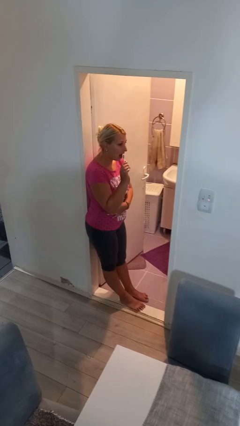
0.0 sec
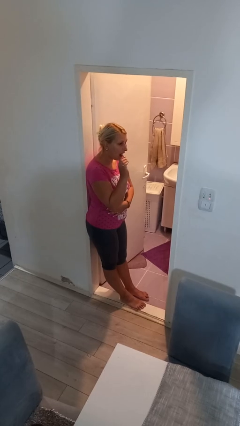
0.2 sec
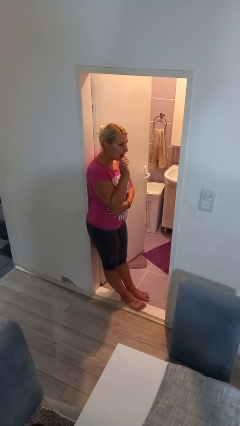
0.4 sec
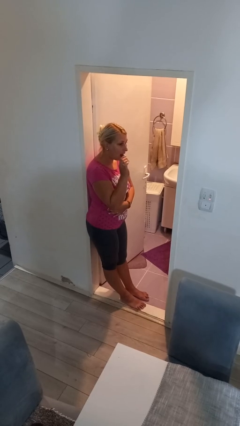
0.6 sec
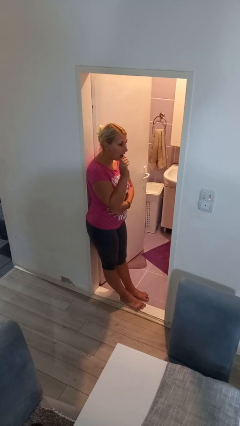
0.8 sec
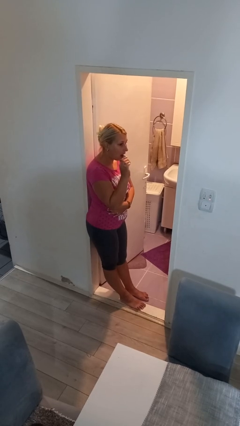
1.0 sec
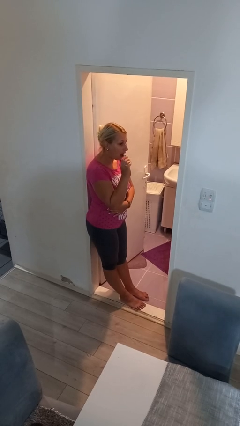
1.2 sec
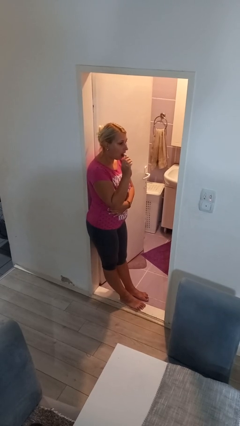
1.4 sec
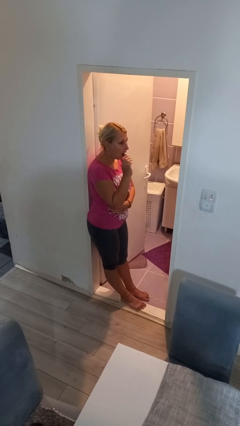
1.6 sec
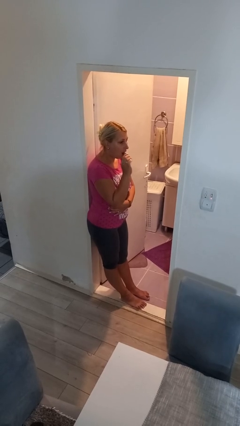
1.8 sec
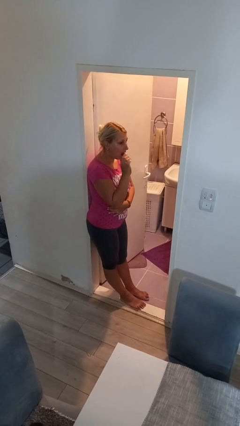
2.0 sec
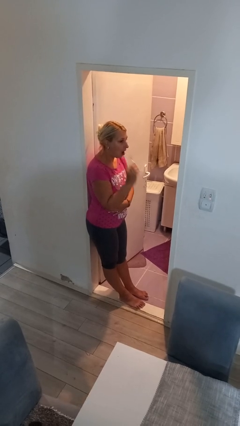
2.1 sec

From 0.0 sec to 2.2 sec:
person brushes teeth

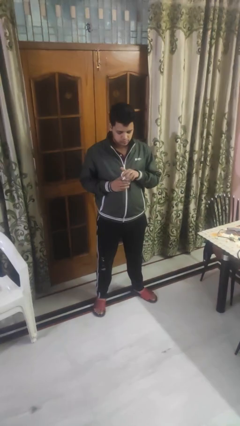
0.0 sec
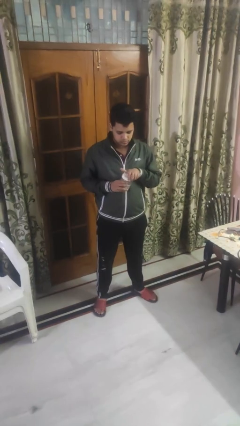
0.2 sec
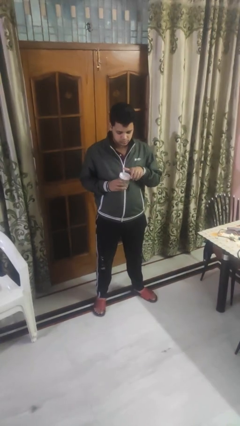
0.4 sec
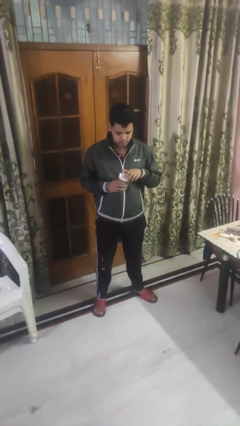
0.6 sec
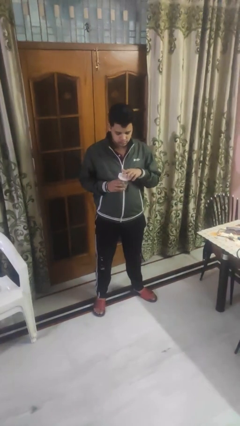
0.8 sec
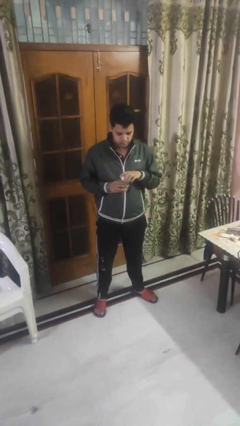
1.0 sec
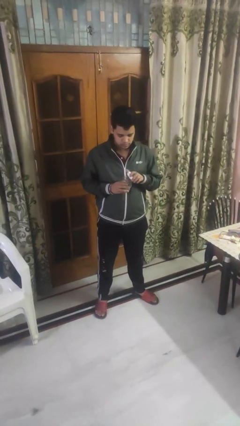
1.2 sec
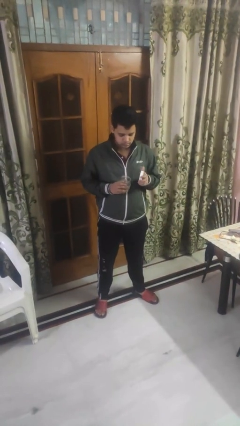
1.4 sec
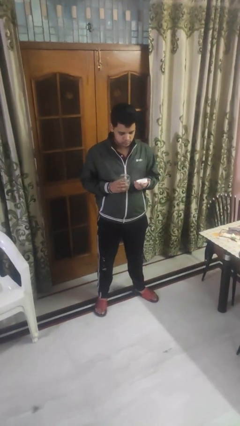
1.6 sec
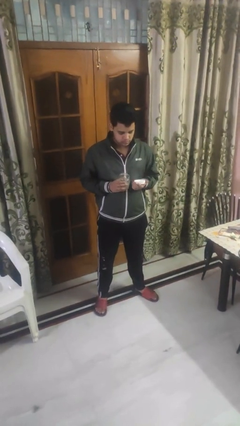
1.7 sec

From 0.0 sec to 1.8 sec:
person opens jar

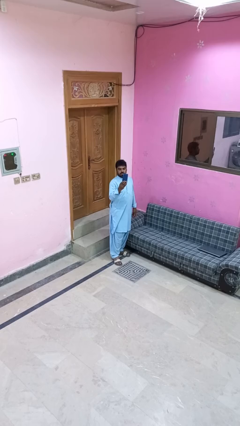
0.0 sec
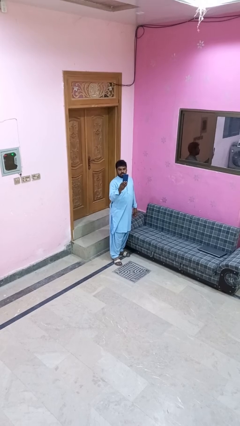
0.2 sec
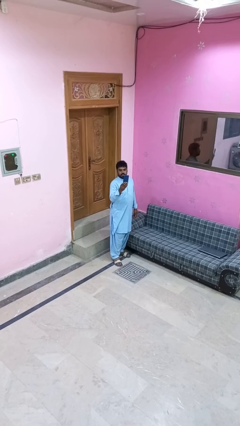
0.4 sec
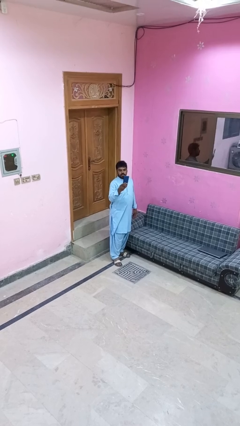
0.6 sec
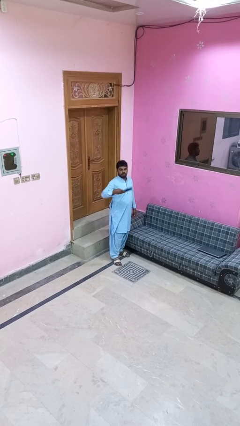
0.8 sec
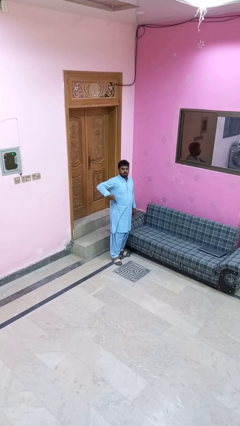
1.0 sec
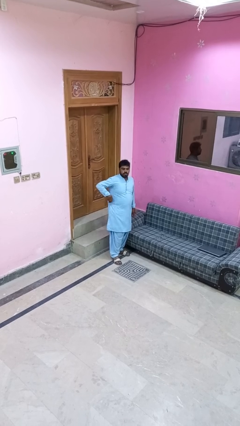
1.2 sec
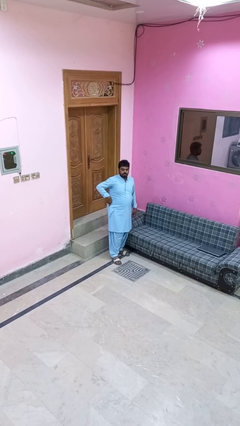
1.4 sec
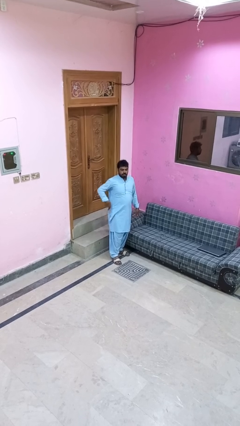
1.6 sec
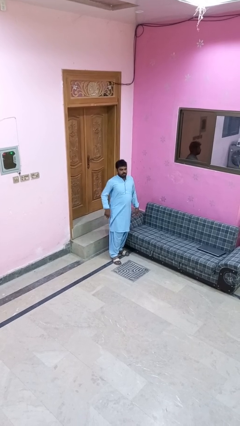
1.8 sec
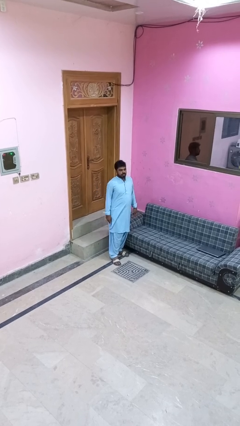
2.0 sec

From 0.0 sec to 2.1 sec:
person puts phone into pocket

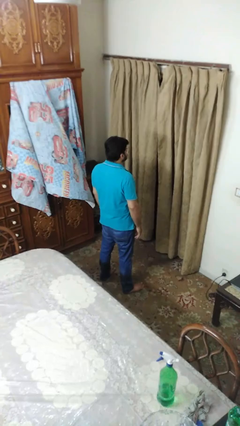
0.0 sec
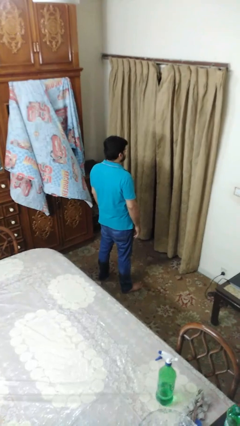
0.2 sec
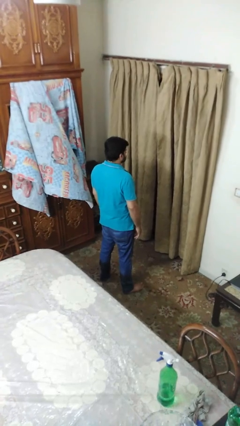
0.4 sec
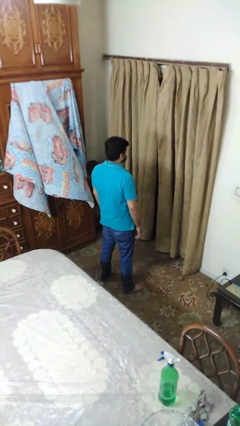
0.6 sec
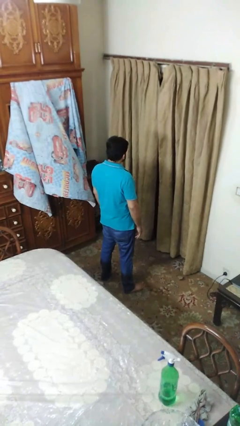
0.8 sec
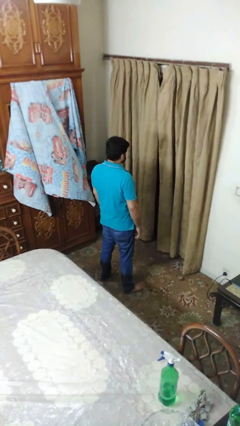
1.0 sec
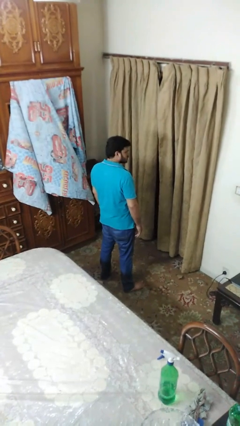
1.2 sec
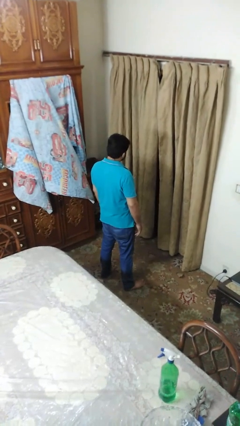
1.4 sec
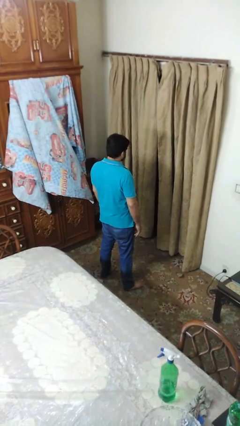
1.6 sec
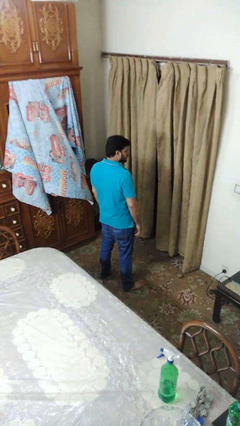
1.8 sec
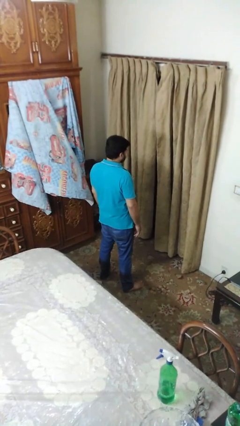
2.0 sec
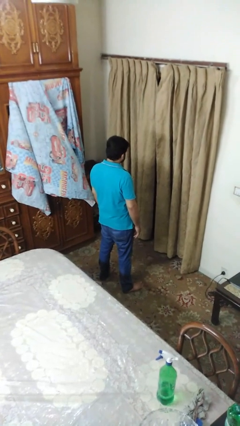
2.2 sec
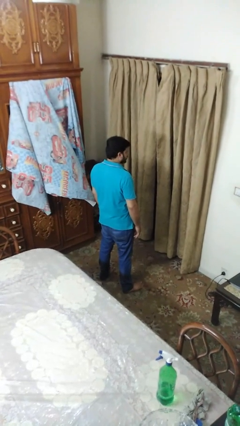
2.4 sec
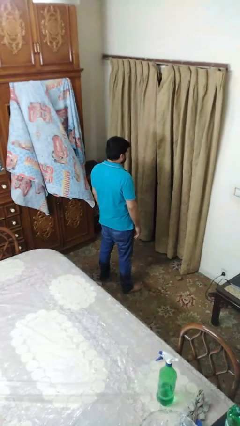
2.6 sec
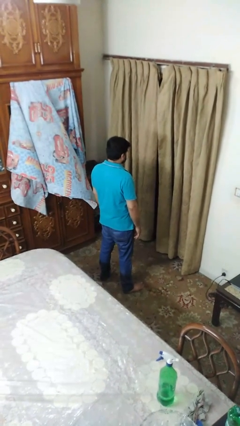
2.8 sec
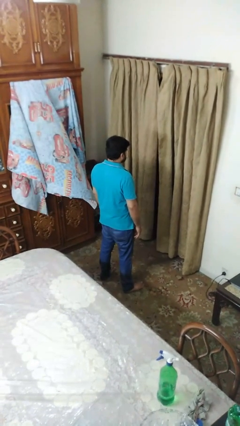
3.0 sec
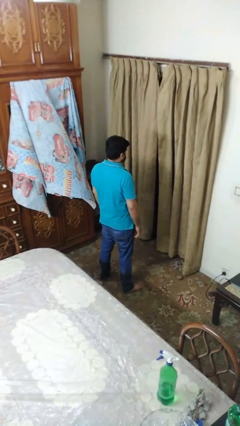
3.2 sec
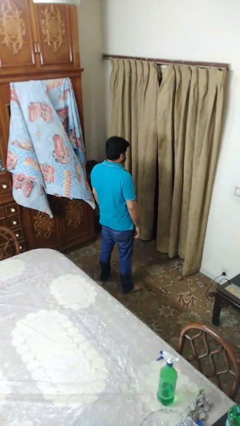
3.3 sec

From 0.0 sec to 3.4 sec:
person shakes head

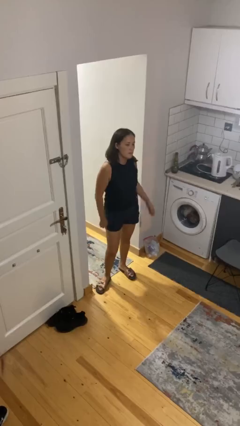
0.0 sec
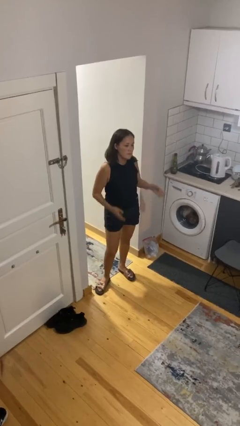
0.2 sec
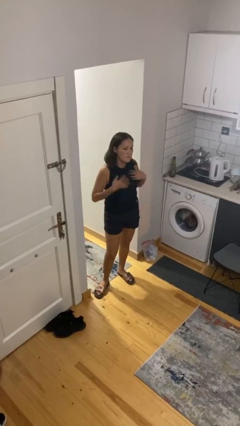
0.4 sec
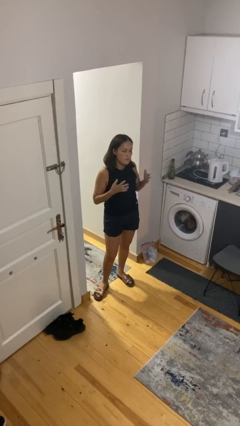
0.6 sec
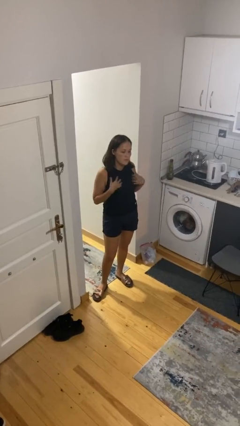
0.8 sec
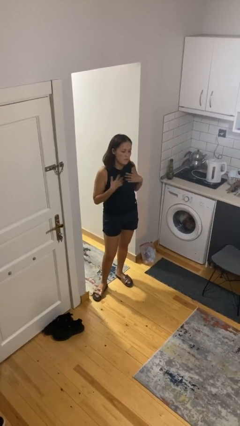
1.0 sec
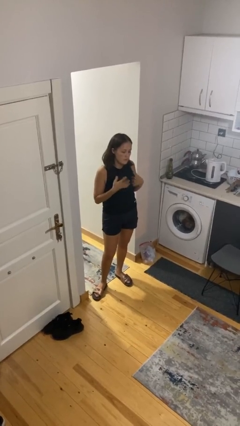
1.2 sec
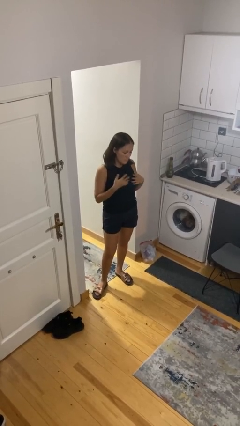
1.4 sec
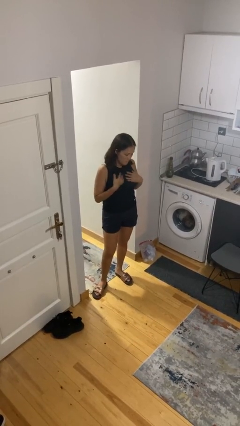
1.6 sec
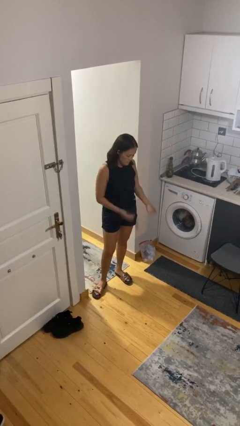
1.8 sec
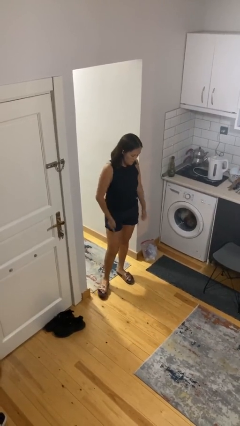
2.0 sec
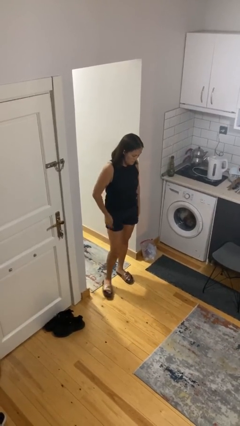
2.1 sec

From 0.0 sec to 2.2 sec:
person drums on chest

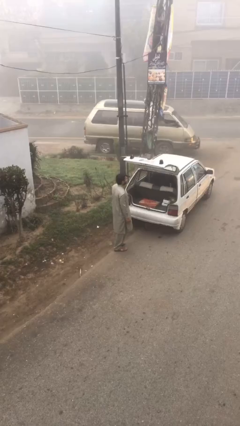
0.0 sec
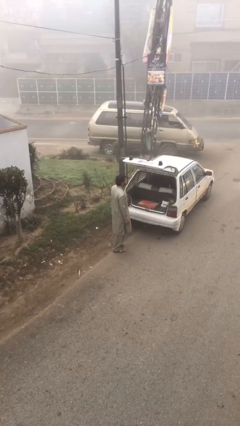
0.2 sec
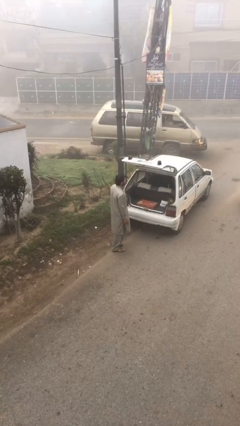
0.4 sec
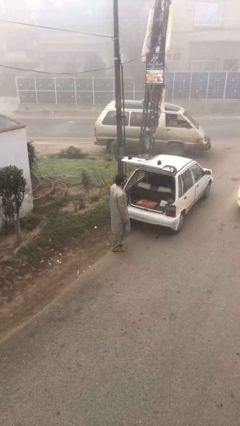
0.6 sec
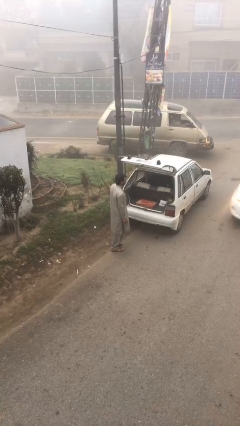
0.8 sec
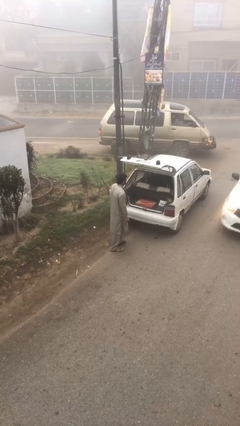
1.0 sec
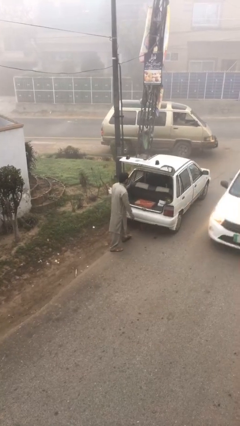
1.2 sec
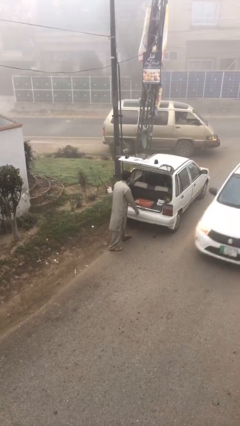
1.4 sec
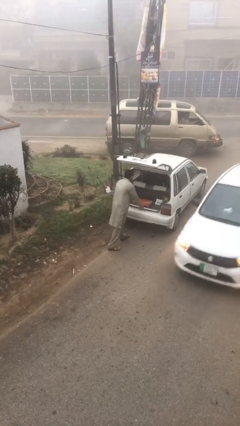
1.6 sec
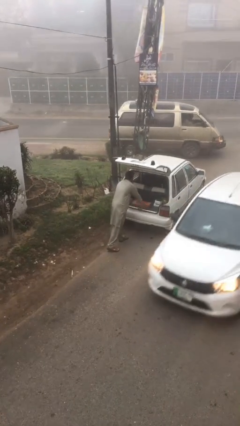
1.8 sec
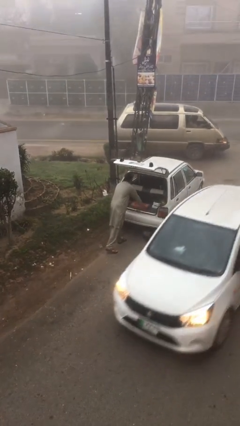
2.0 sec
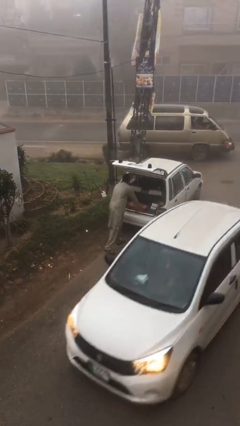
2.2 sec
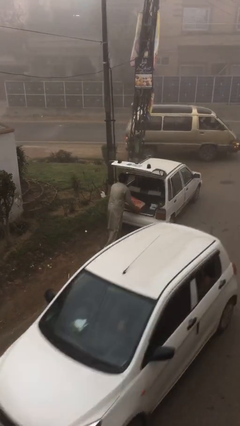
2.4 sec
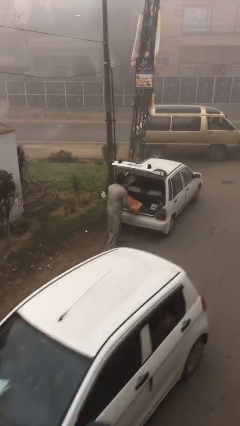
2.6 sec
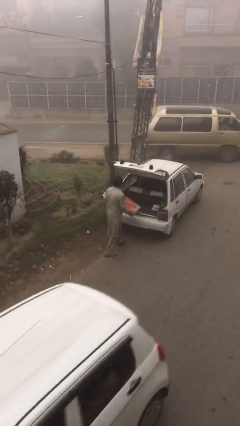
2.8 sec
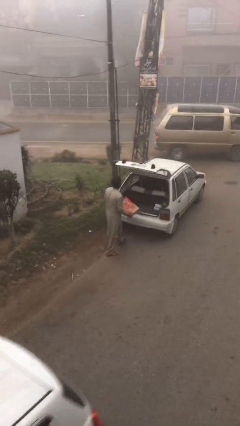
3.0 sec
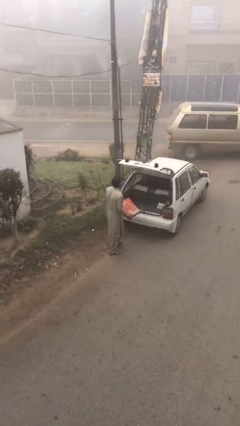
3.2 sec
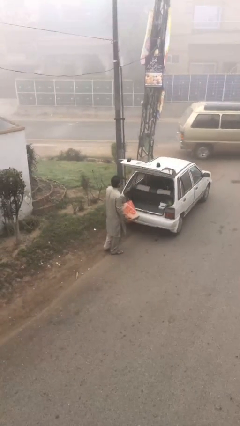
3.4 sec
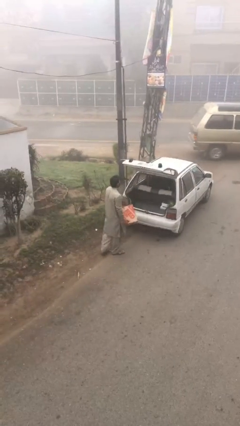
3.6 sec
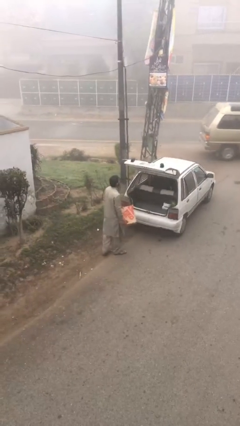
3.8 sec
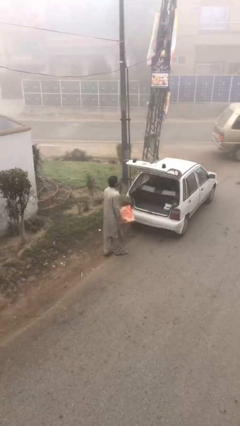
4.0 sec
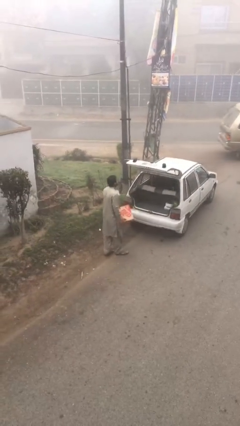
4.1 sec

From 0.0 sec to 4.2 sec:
person unloads car

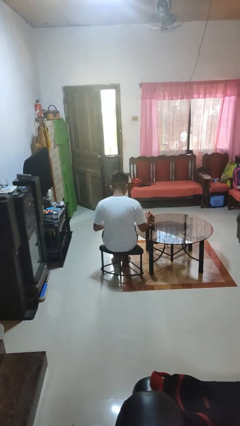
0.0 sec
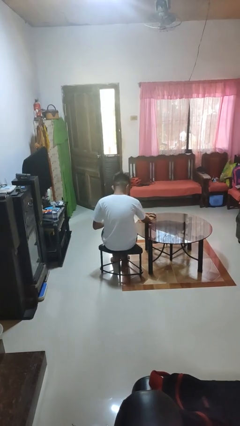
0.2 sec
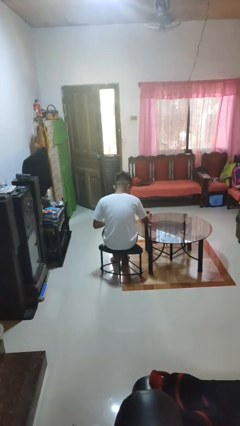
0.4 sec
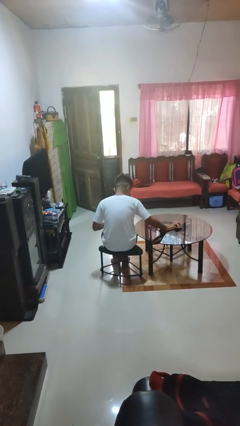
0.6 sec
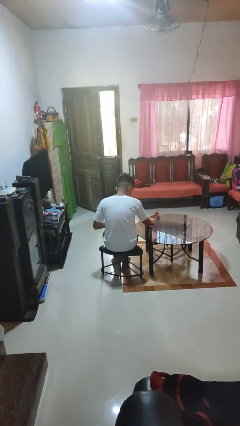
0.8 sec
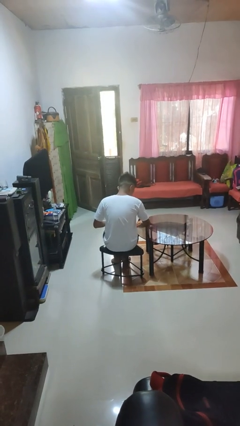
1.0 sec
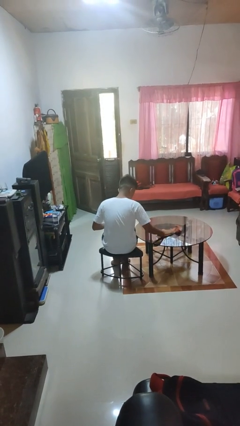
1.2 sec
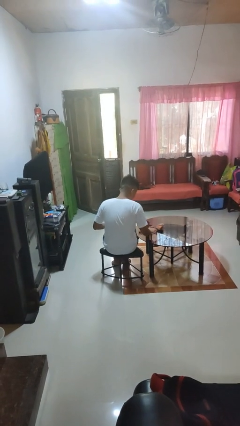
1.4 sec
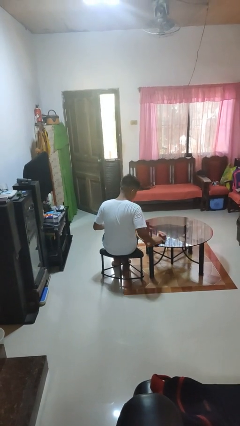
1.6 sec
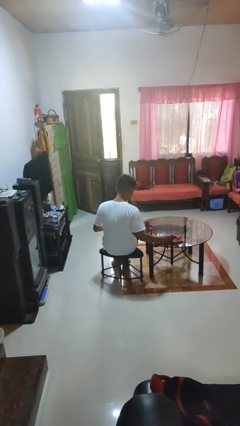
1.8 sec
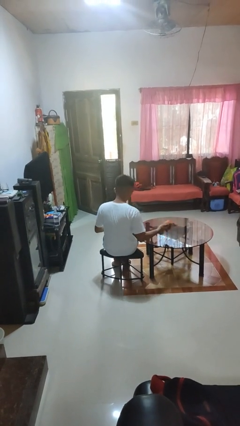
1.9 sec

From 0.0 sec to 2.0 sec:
person cleans table with rag
